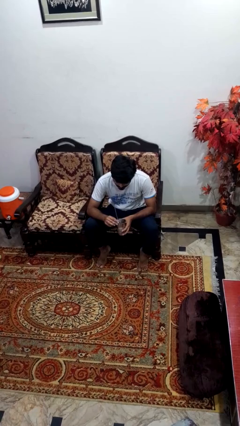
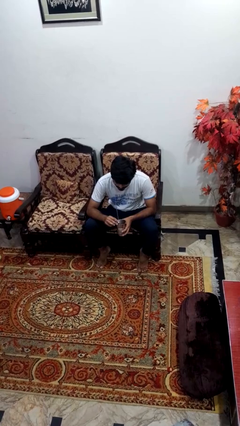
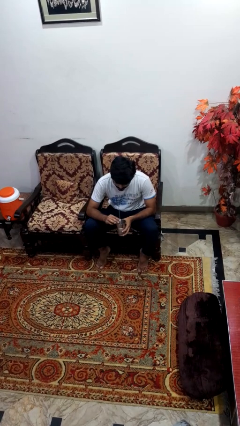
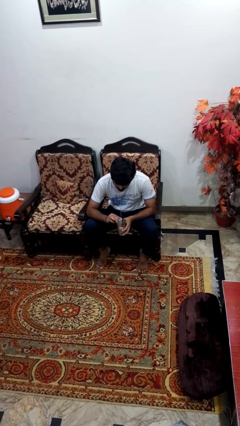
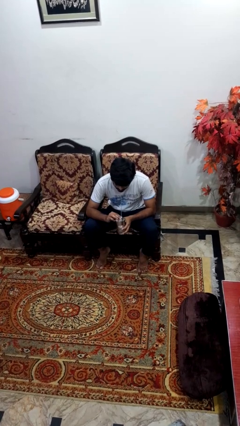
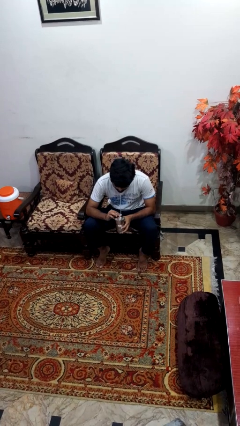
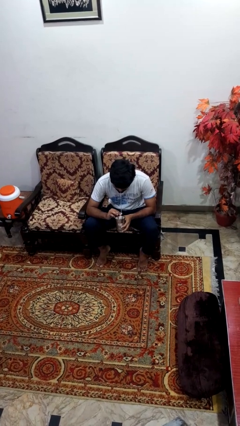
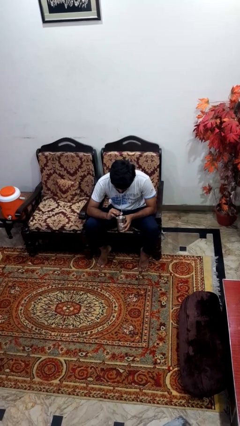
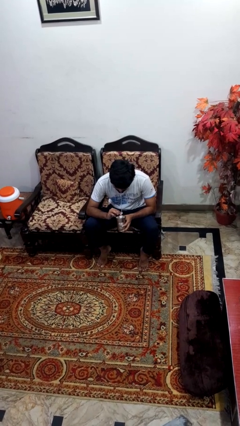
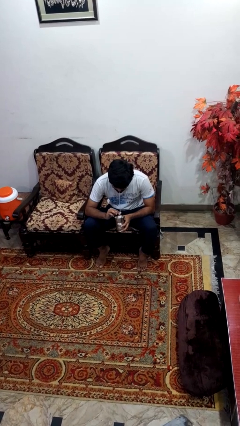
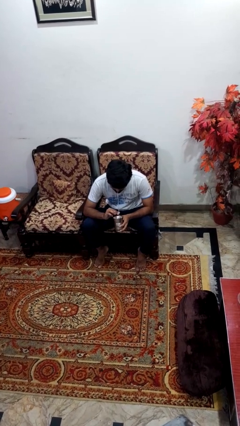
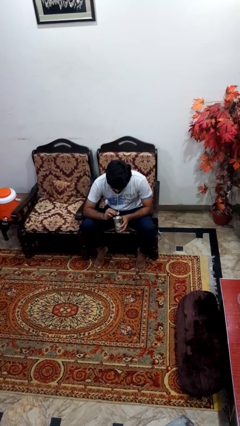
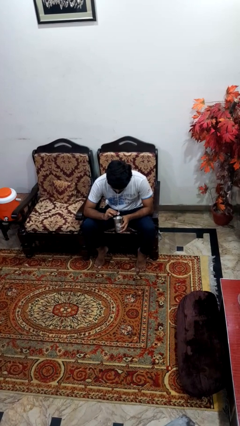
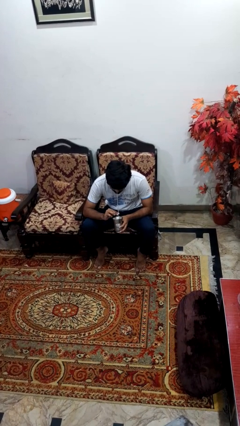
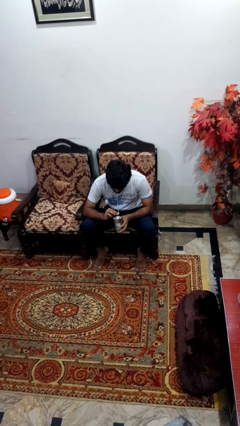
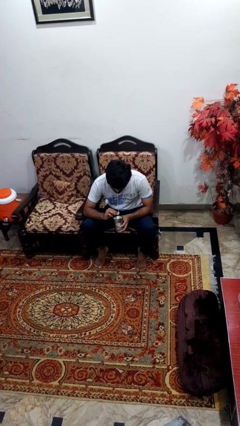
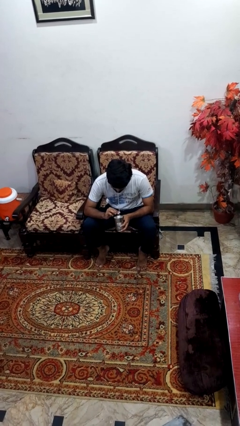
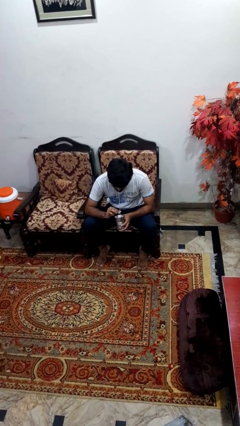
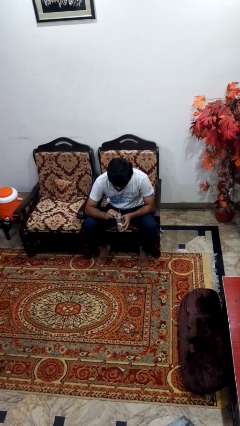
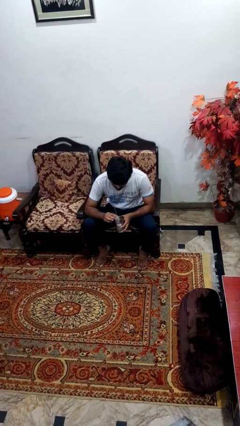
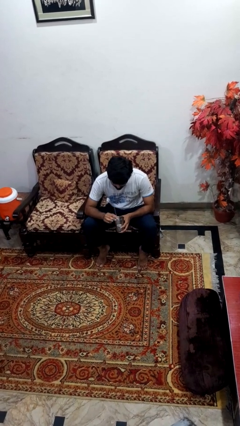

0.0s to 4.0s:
person drinks from straw

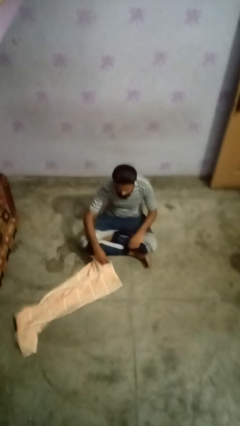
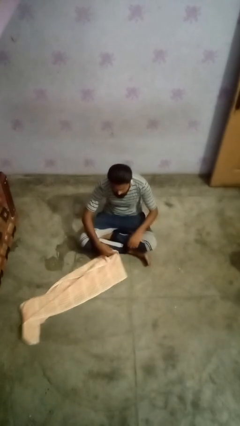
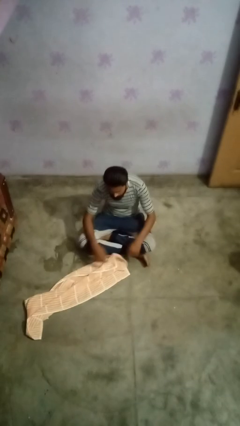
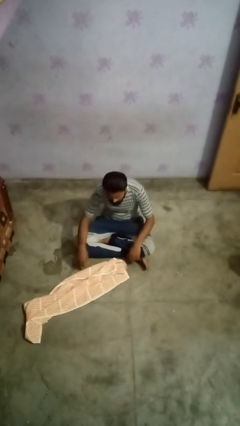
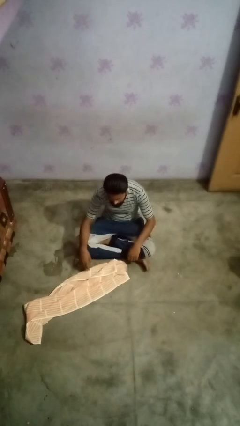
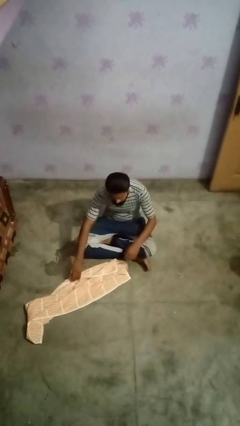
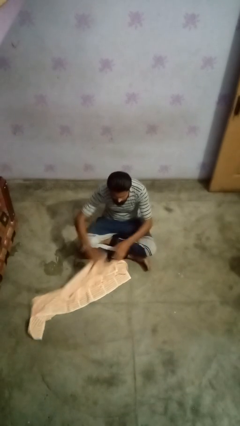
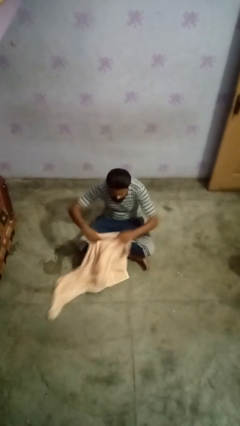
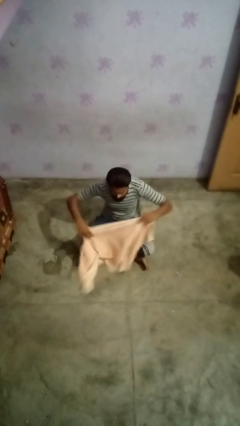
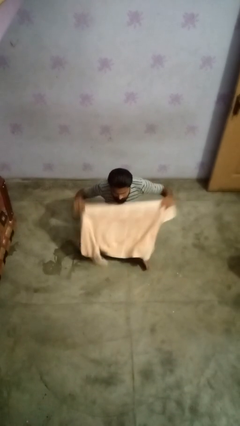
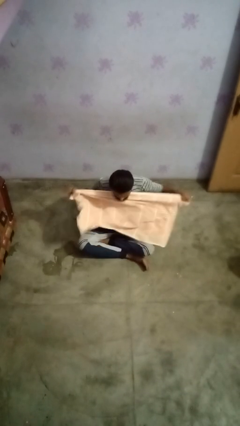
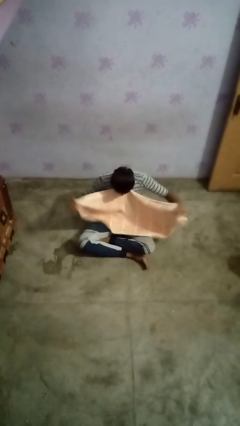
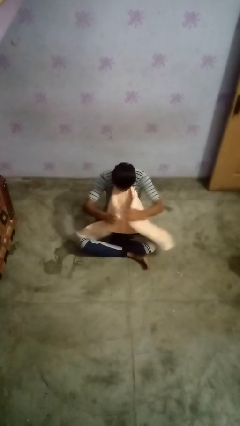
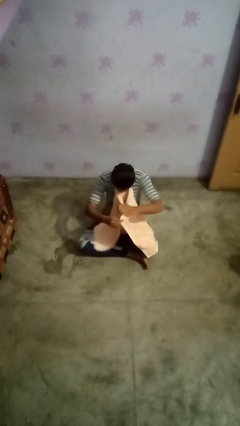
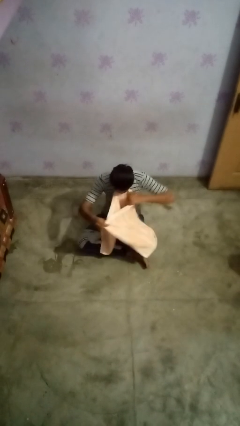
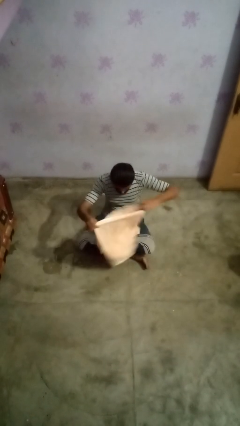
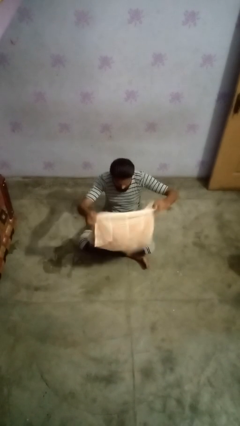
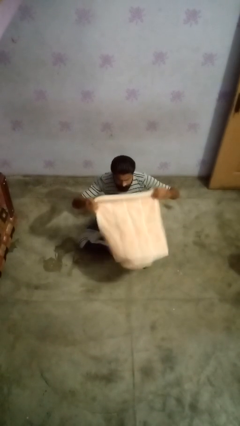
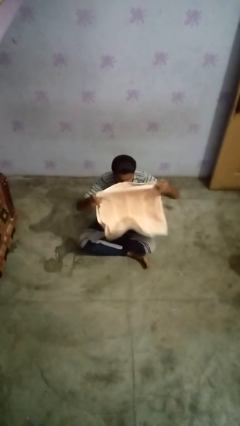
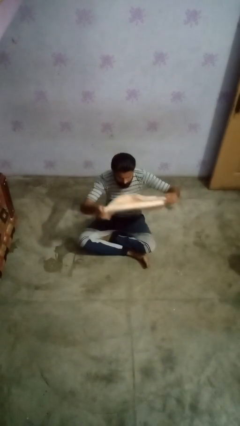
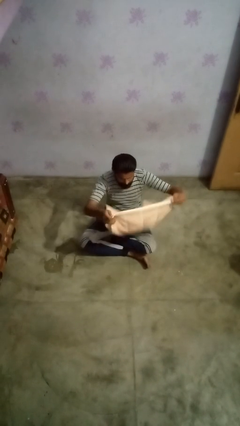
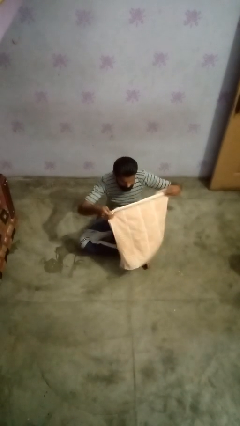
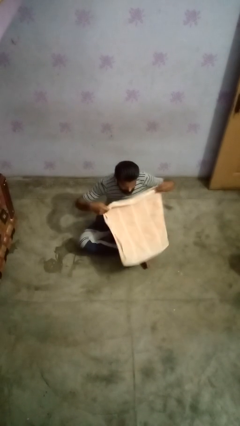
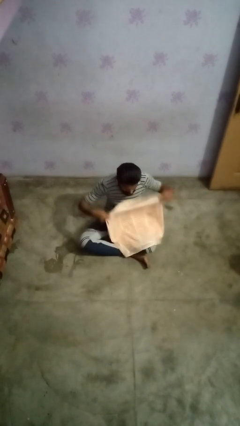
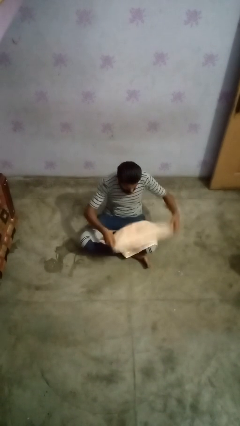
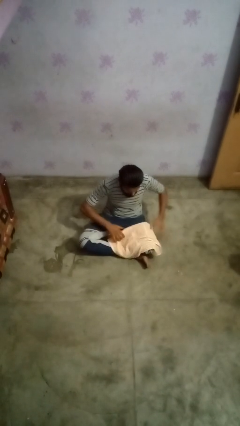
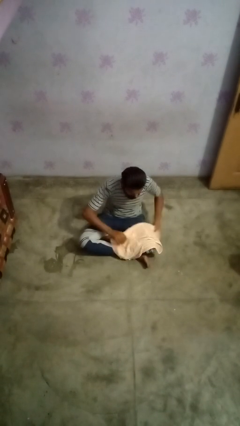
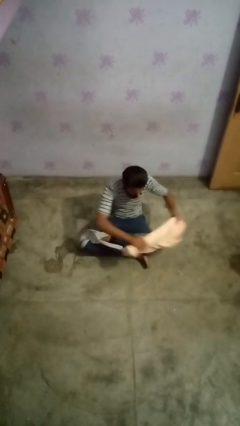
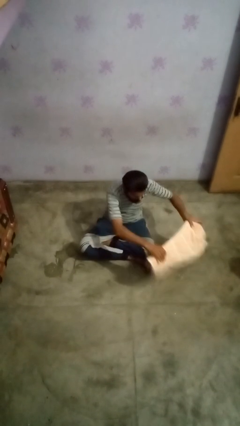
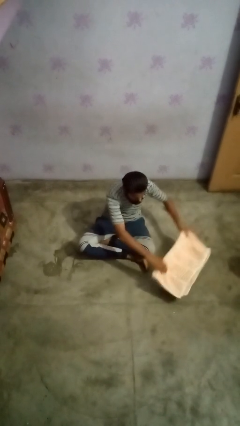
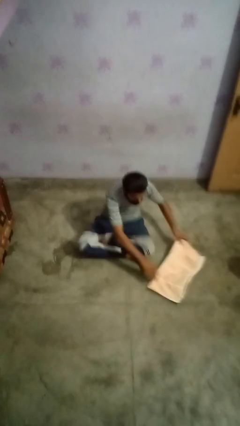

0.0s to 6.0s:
person folds towel

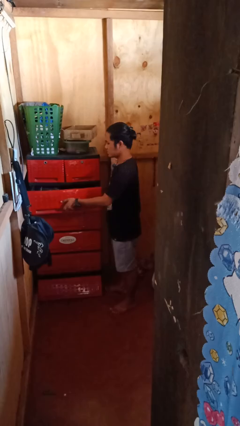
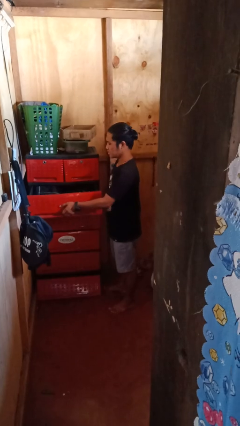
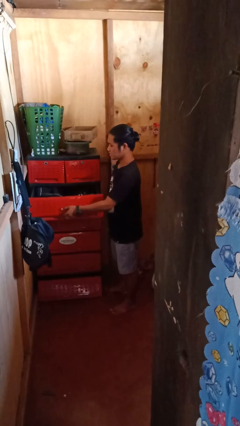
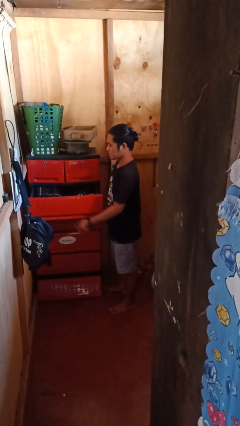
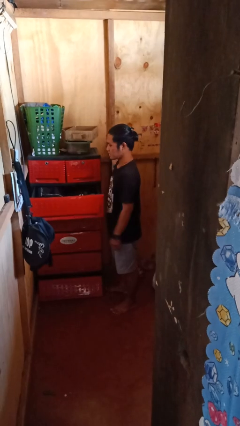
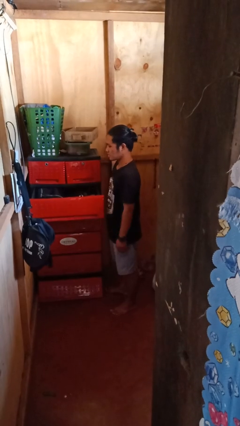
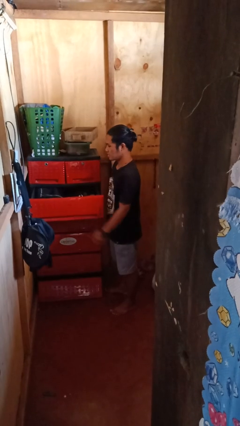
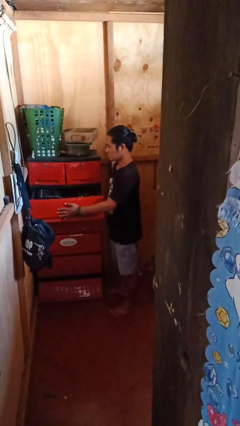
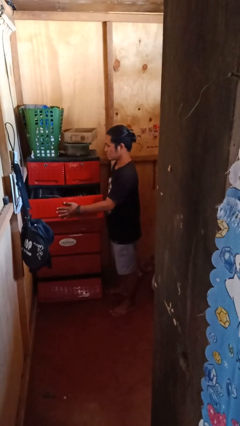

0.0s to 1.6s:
person opens dresser drawer

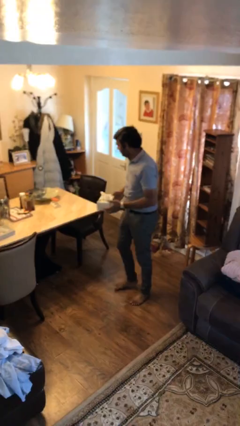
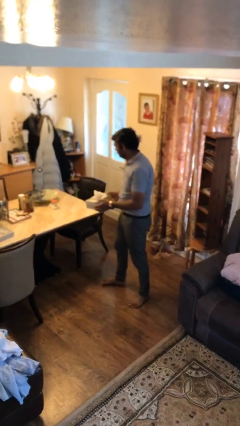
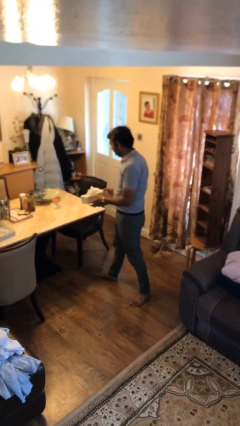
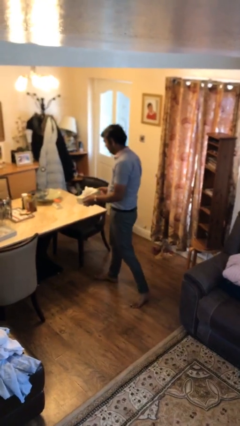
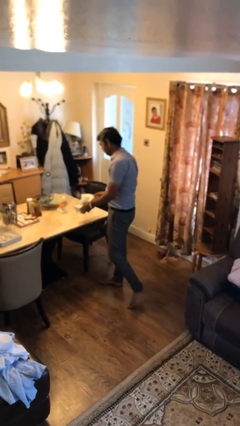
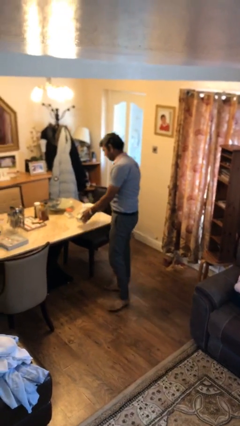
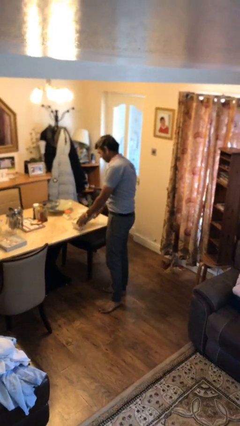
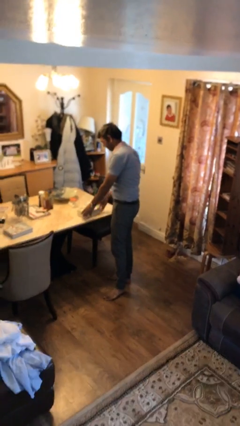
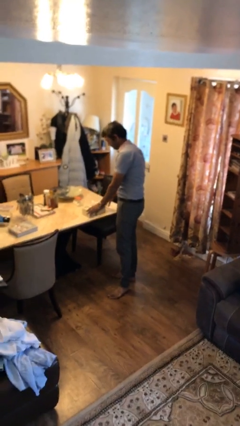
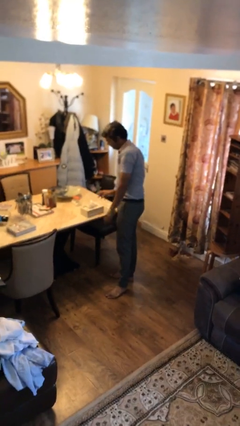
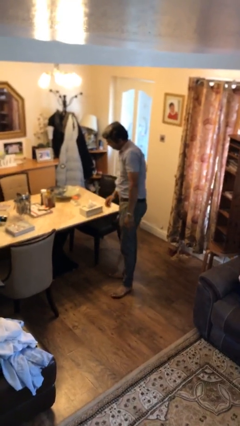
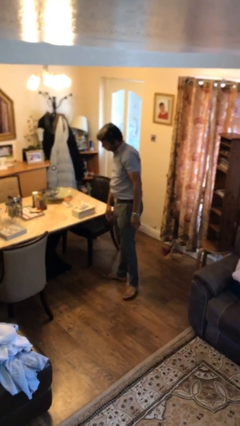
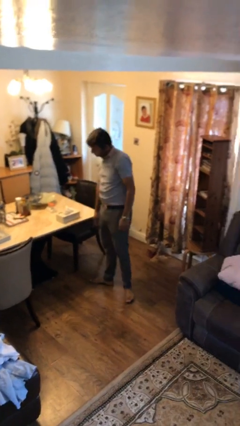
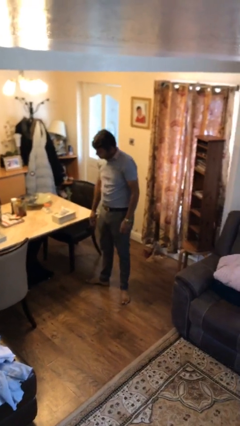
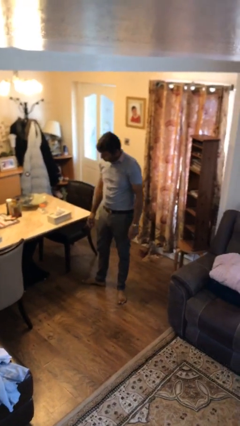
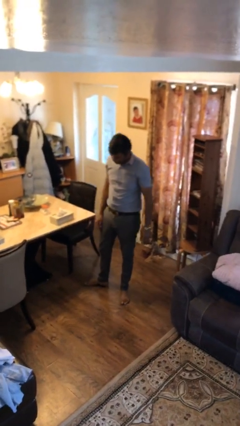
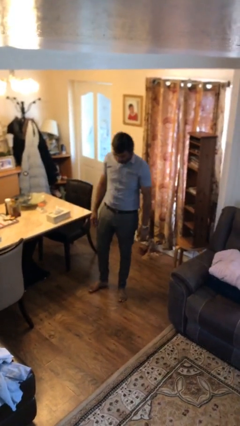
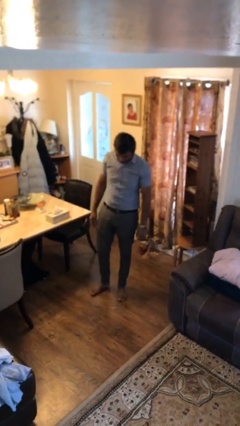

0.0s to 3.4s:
person puts down object on table

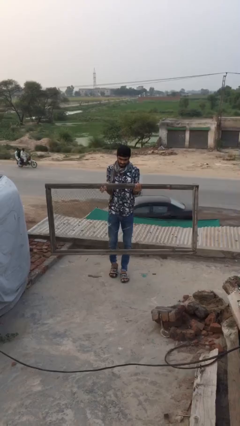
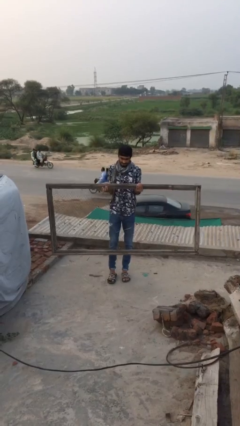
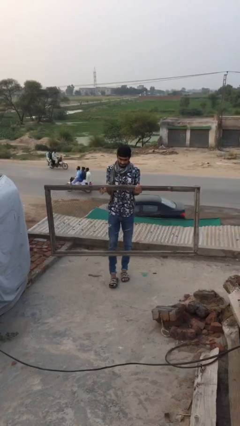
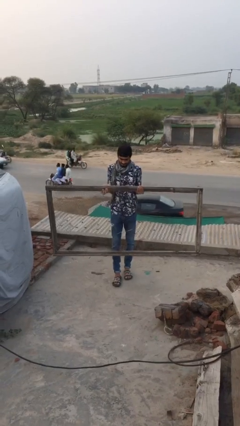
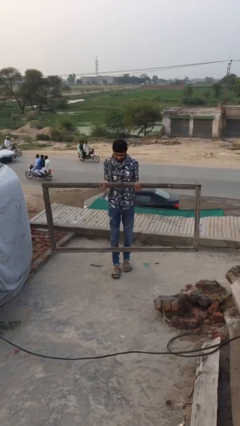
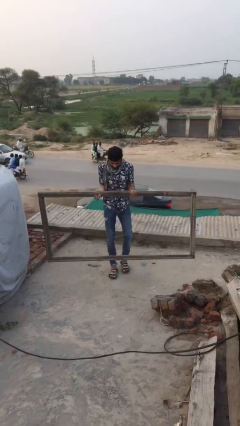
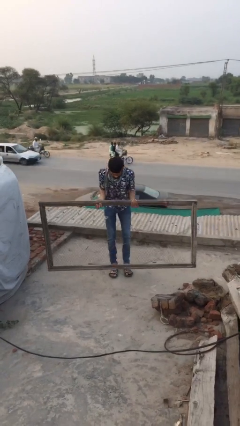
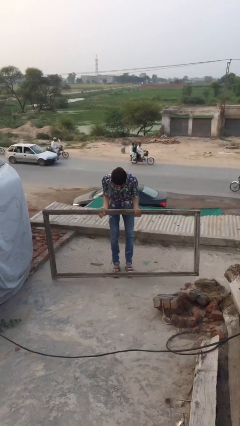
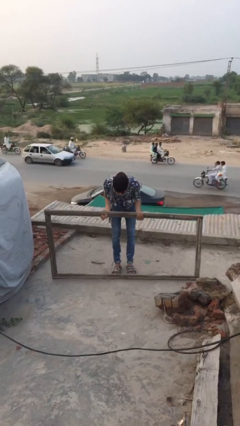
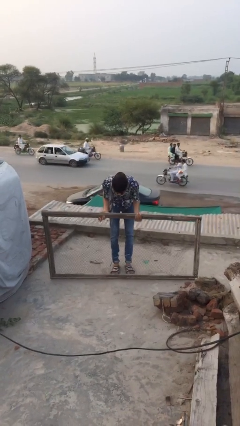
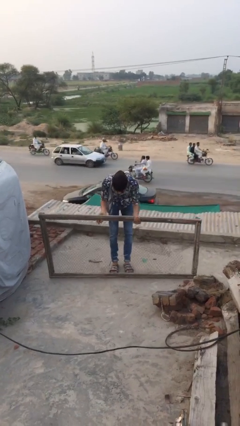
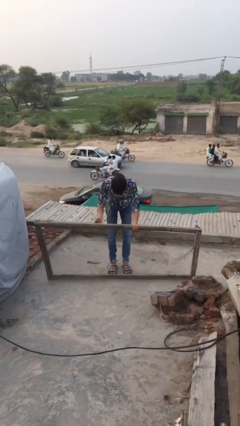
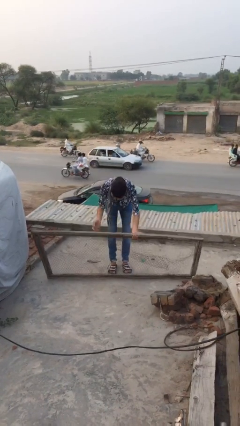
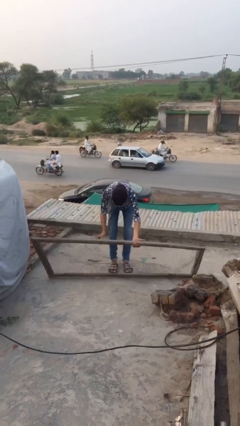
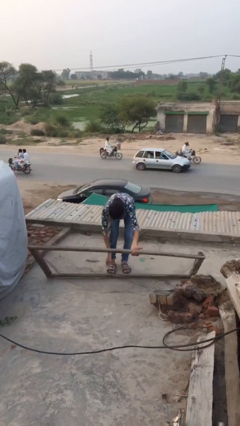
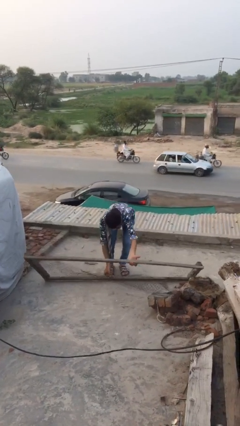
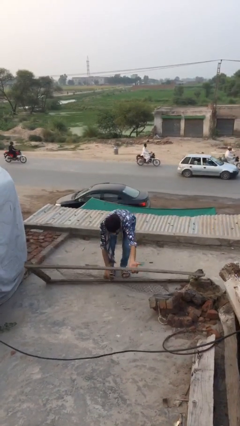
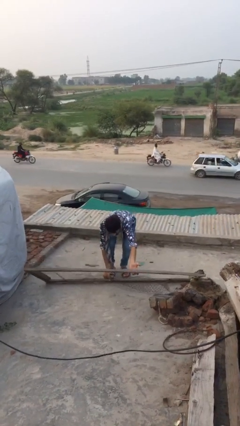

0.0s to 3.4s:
person puts down object on floor
